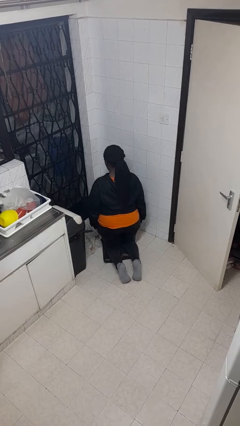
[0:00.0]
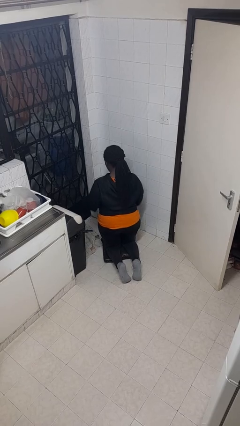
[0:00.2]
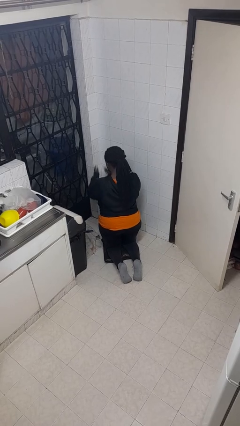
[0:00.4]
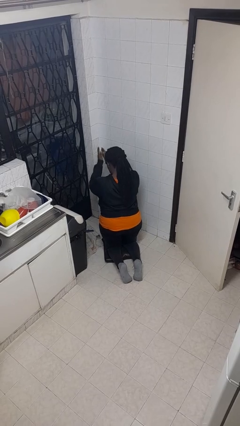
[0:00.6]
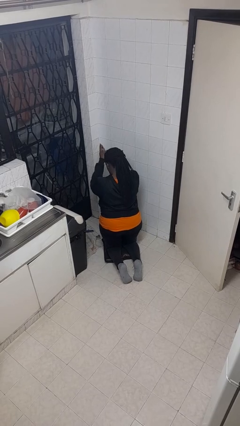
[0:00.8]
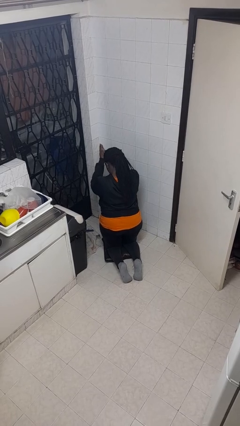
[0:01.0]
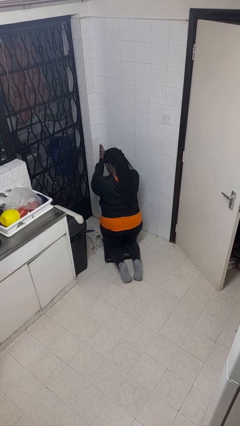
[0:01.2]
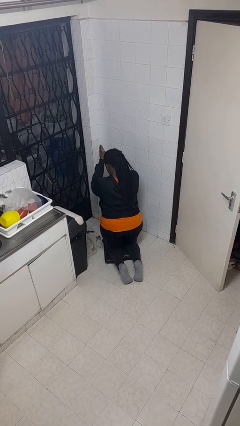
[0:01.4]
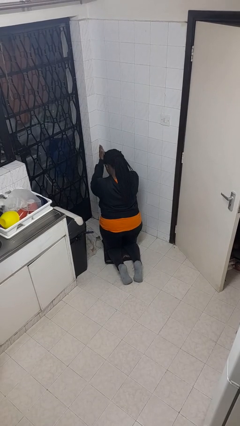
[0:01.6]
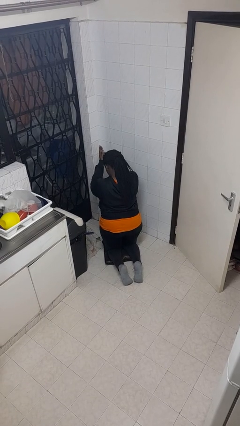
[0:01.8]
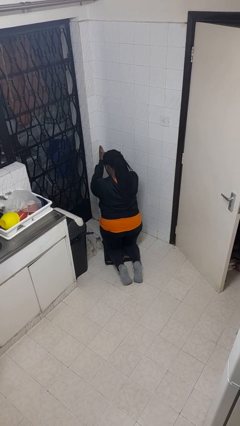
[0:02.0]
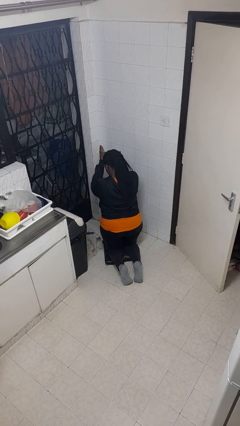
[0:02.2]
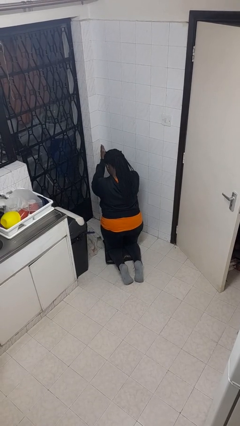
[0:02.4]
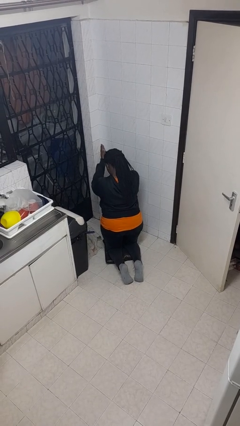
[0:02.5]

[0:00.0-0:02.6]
person prays

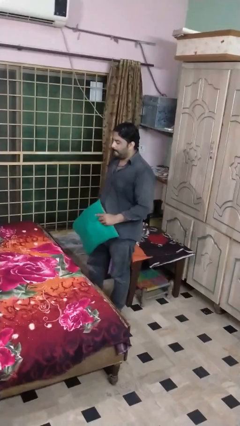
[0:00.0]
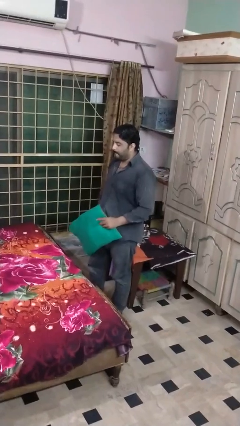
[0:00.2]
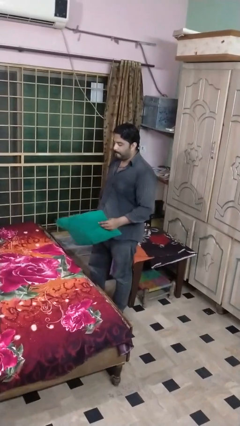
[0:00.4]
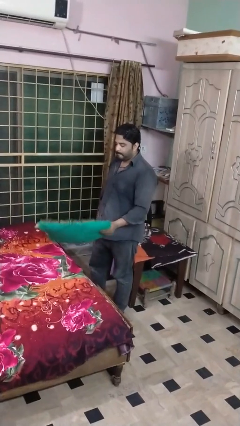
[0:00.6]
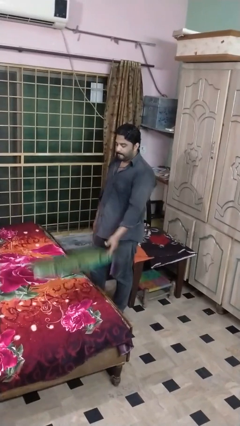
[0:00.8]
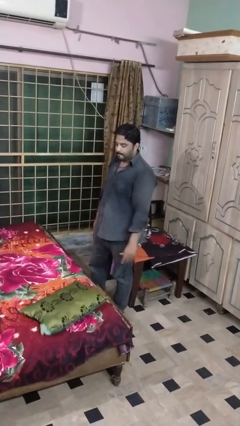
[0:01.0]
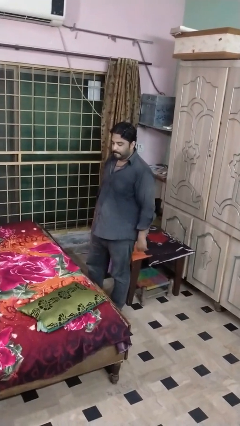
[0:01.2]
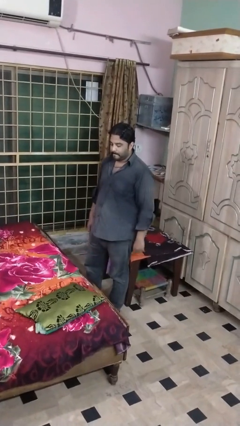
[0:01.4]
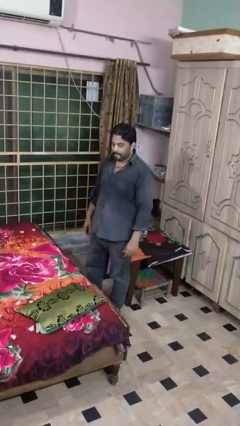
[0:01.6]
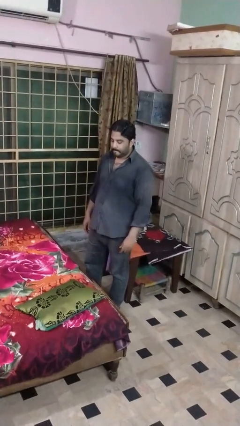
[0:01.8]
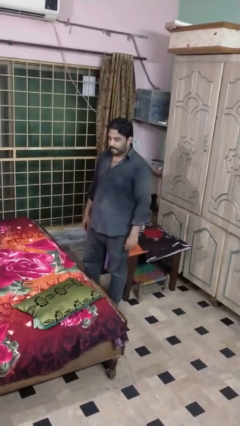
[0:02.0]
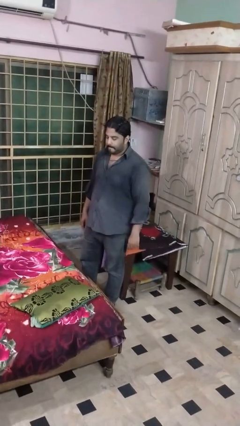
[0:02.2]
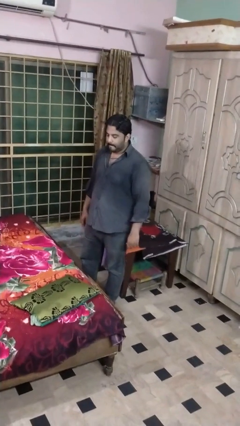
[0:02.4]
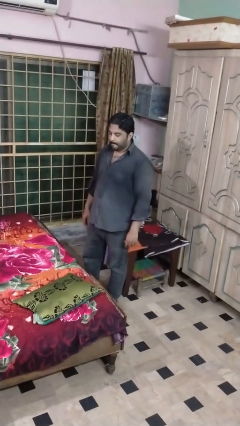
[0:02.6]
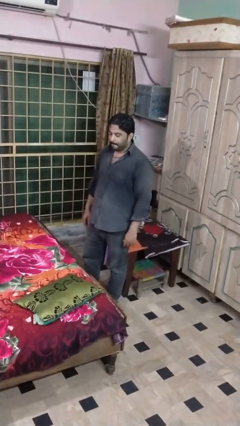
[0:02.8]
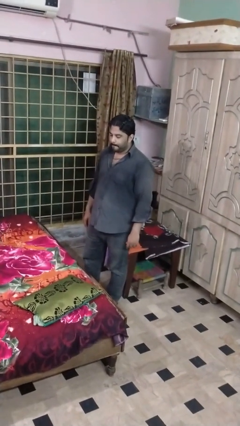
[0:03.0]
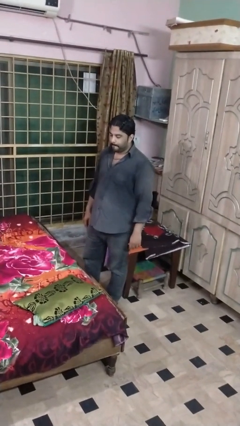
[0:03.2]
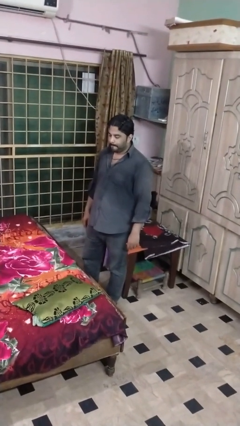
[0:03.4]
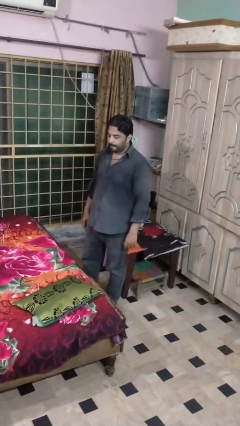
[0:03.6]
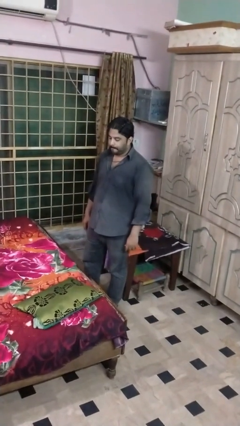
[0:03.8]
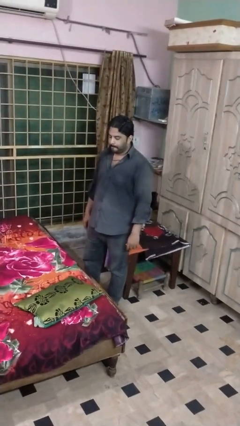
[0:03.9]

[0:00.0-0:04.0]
person puts down object on bed

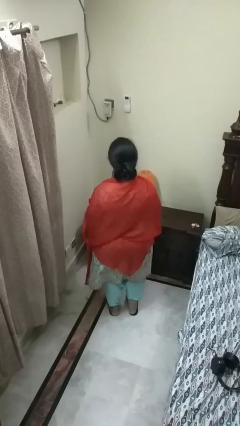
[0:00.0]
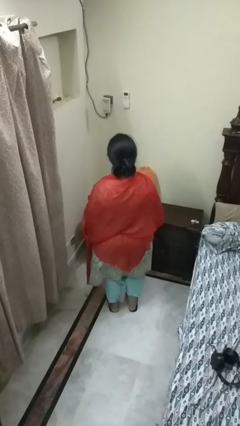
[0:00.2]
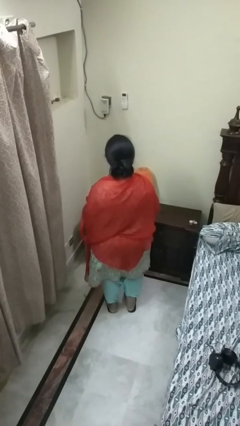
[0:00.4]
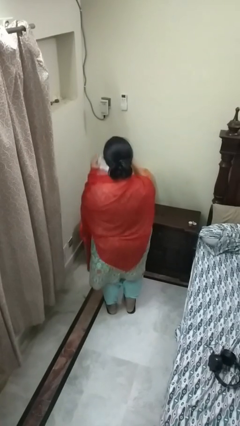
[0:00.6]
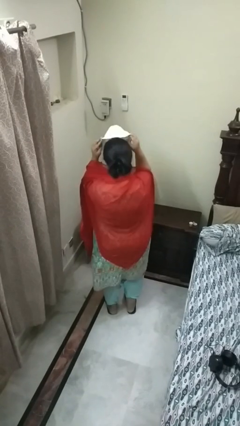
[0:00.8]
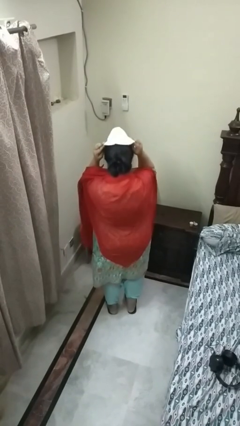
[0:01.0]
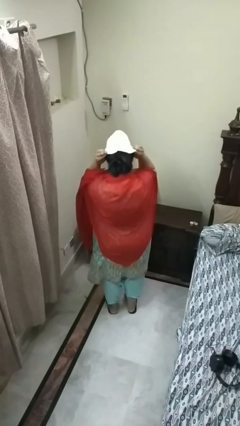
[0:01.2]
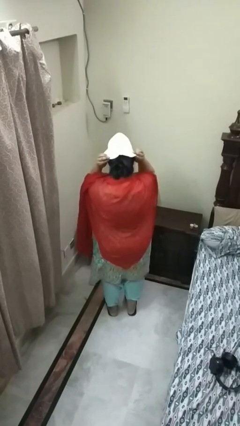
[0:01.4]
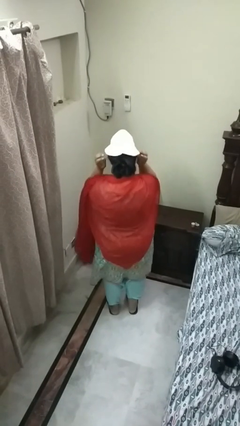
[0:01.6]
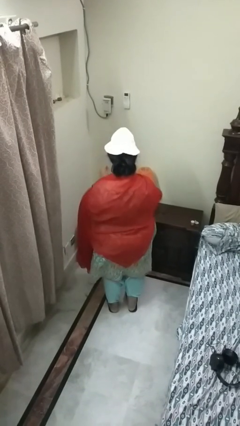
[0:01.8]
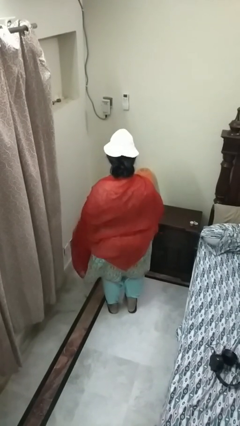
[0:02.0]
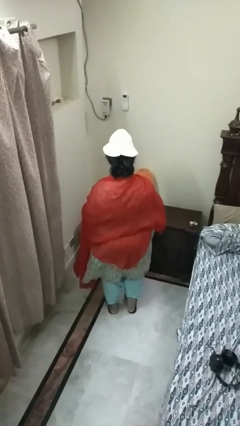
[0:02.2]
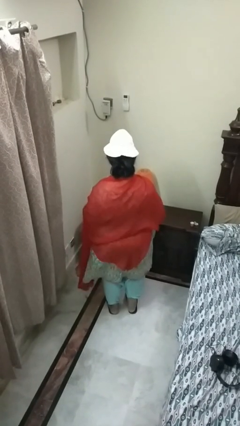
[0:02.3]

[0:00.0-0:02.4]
person puts on hat

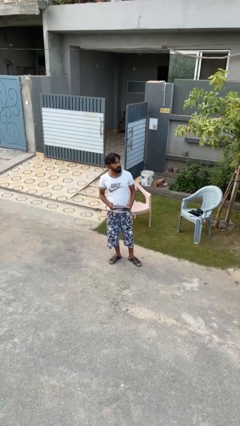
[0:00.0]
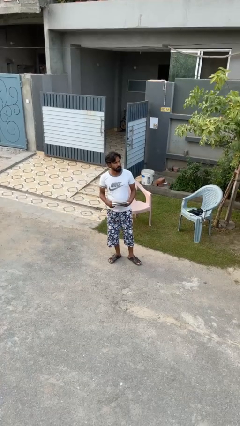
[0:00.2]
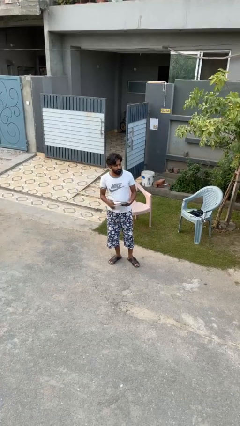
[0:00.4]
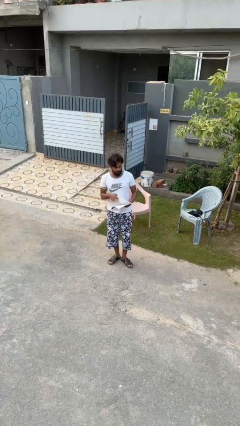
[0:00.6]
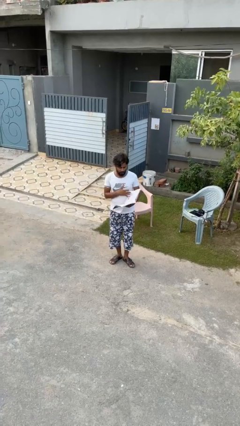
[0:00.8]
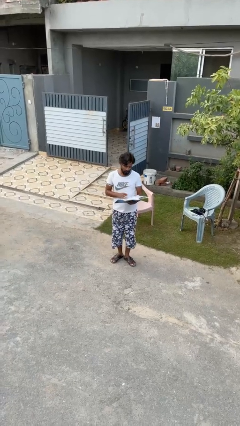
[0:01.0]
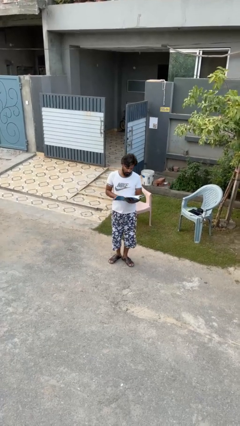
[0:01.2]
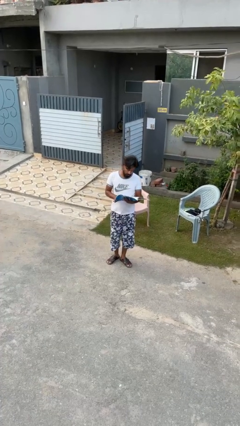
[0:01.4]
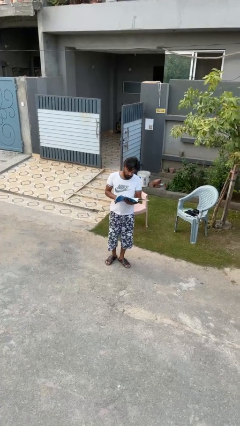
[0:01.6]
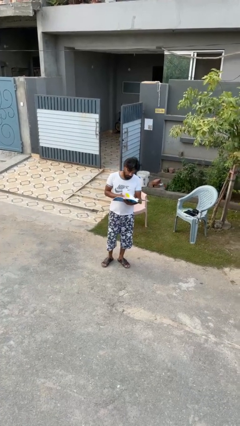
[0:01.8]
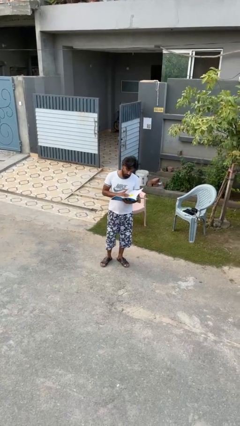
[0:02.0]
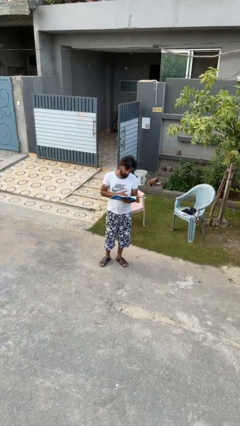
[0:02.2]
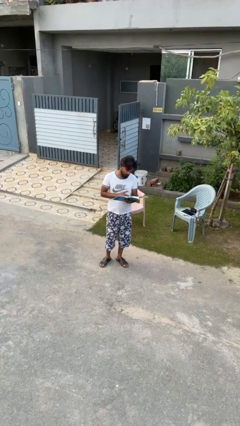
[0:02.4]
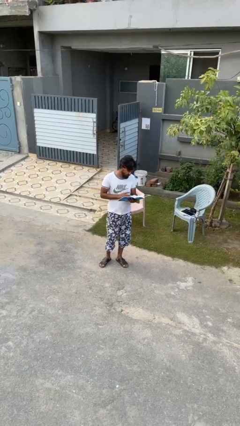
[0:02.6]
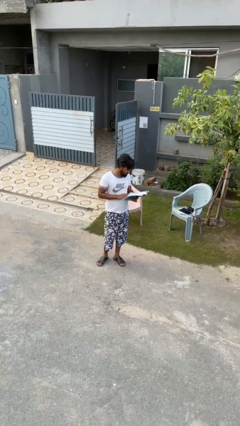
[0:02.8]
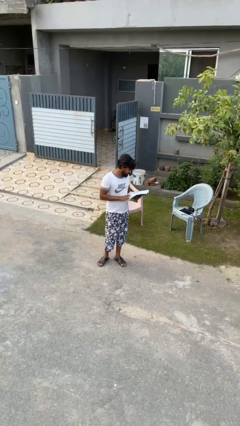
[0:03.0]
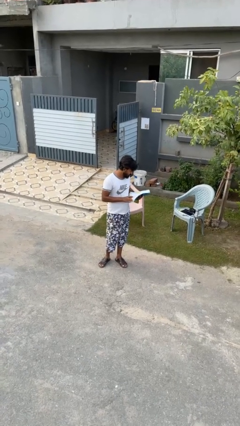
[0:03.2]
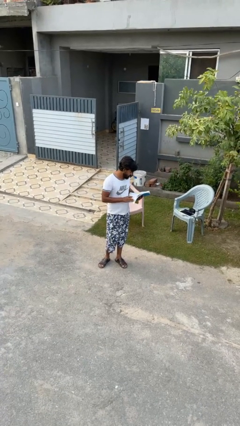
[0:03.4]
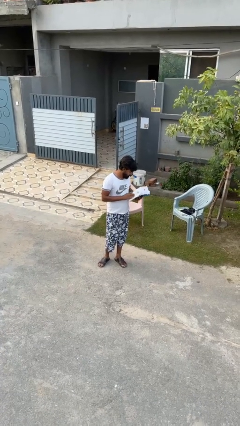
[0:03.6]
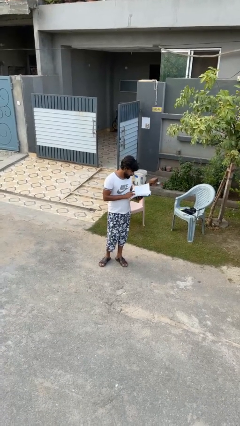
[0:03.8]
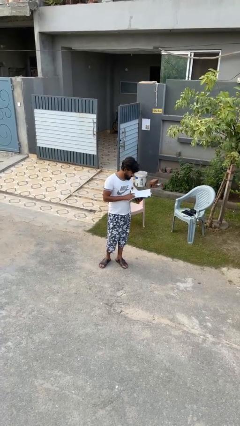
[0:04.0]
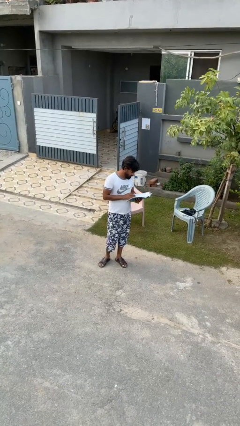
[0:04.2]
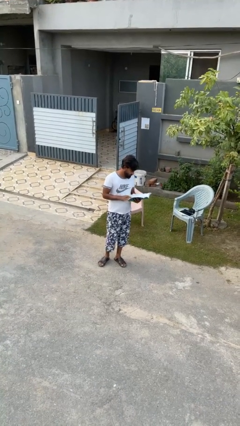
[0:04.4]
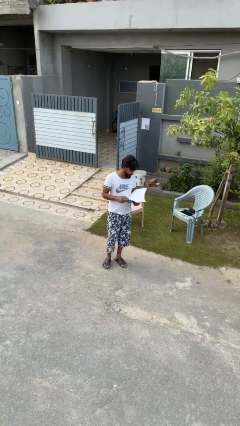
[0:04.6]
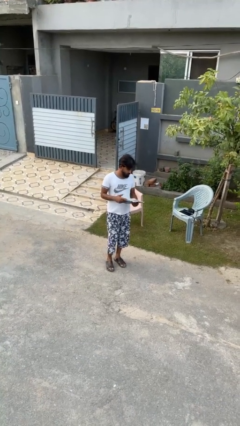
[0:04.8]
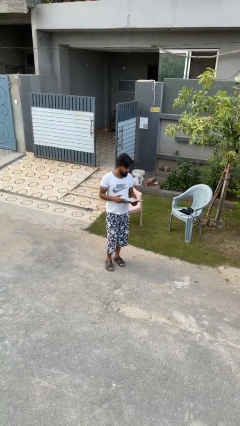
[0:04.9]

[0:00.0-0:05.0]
person reads book

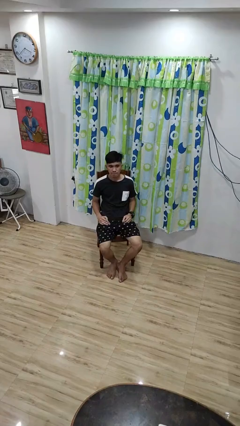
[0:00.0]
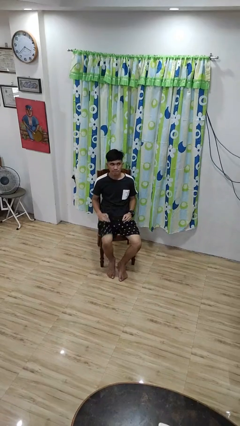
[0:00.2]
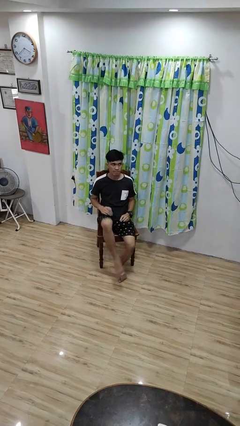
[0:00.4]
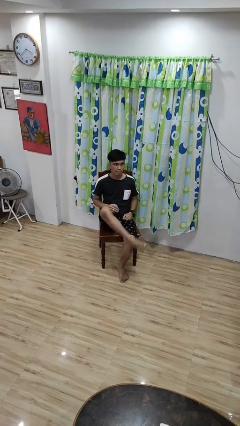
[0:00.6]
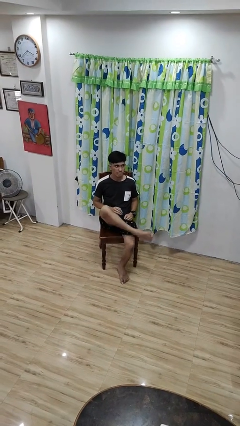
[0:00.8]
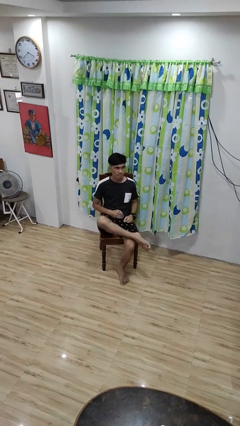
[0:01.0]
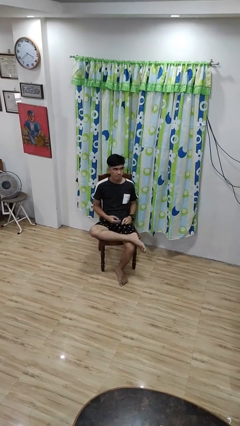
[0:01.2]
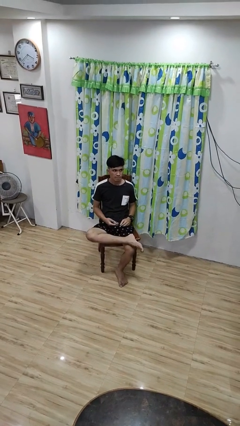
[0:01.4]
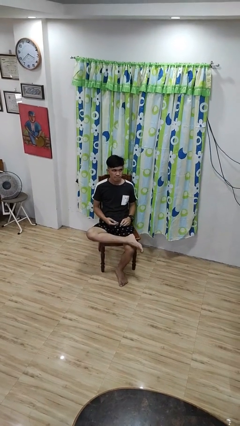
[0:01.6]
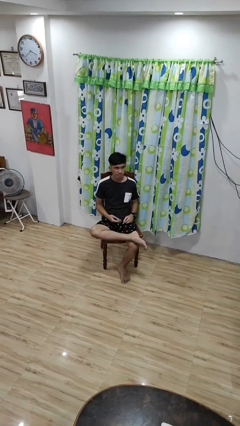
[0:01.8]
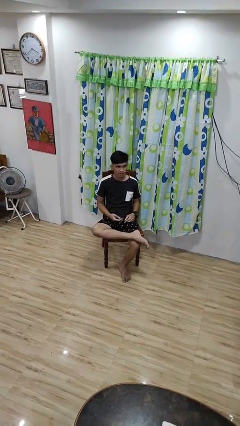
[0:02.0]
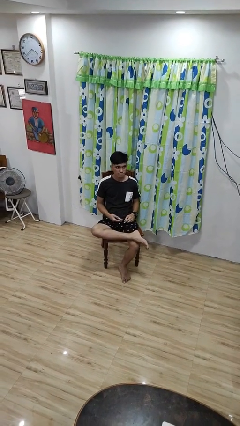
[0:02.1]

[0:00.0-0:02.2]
person crosses legs

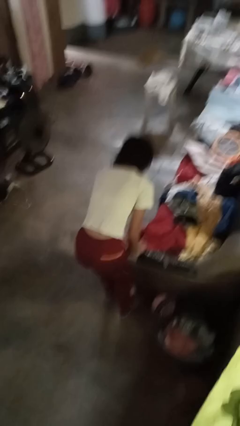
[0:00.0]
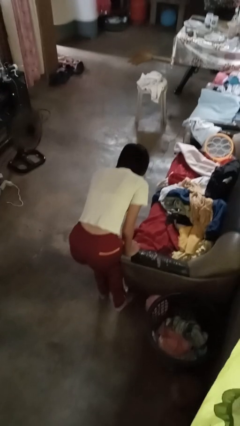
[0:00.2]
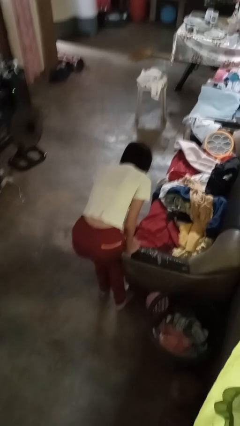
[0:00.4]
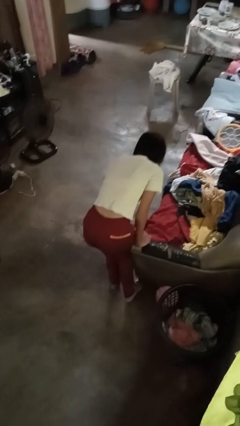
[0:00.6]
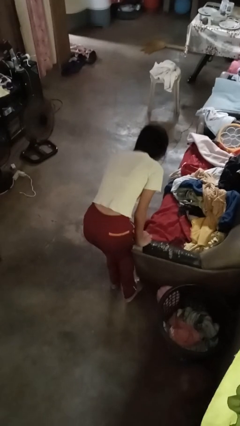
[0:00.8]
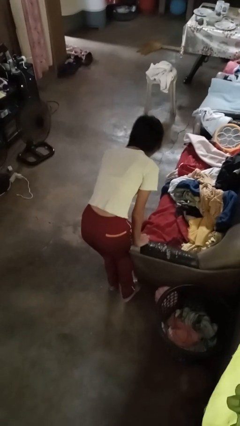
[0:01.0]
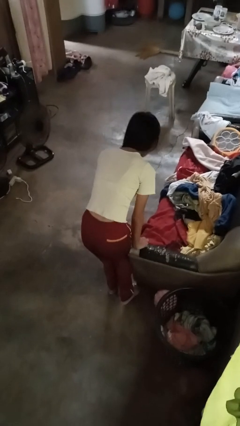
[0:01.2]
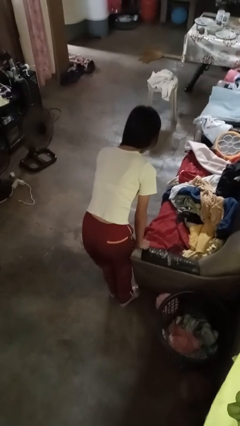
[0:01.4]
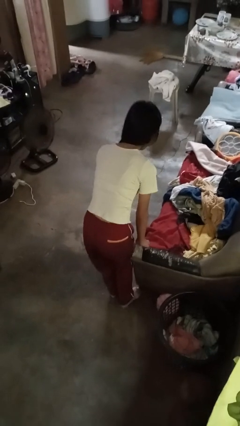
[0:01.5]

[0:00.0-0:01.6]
person stubs toe
